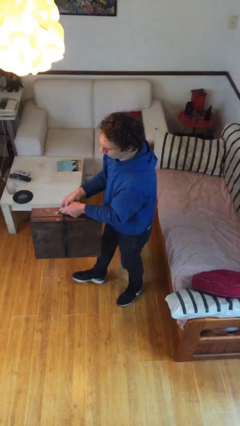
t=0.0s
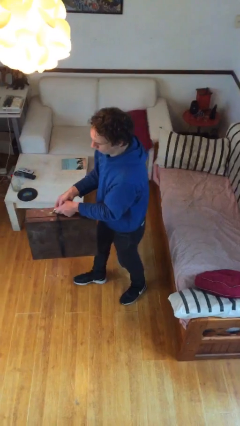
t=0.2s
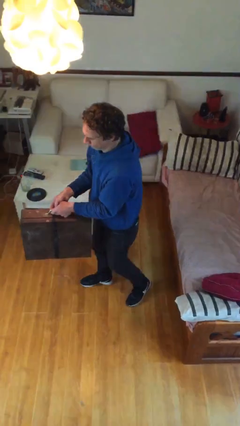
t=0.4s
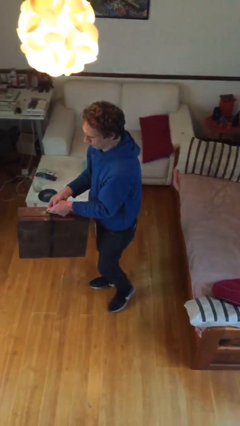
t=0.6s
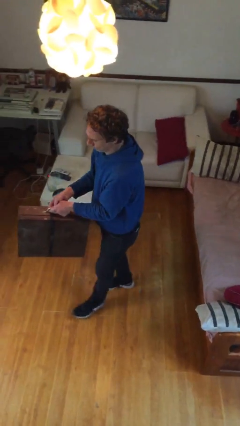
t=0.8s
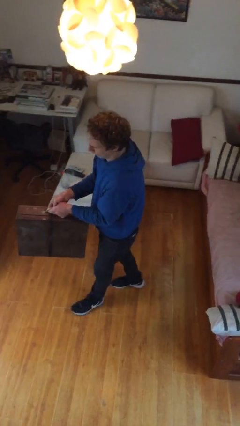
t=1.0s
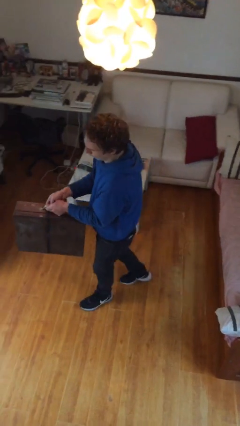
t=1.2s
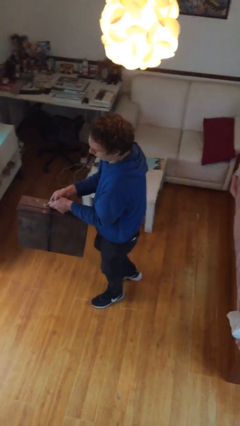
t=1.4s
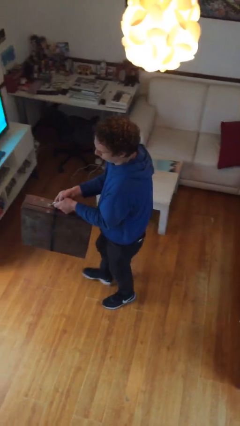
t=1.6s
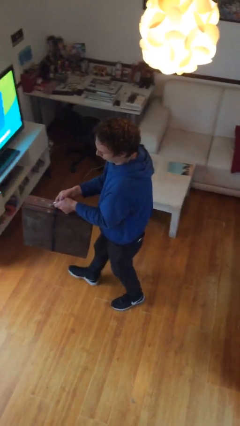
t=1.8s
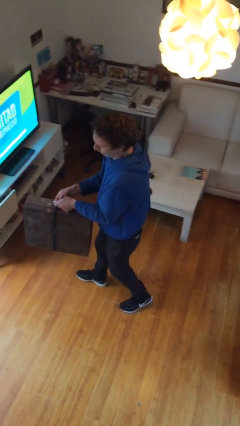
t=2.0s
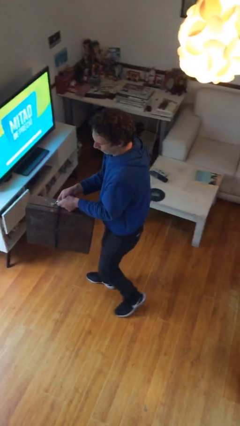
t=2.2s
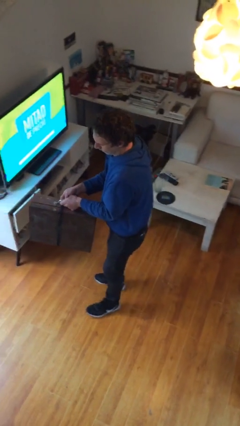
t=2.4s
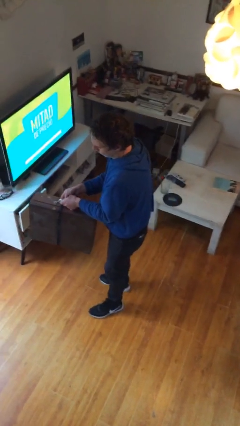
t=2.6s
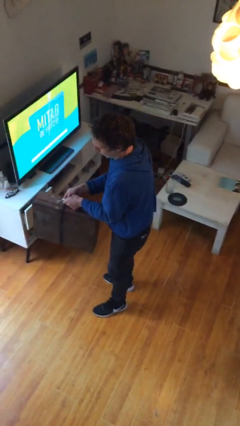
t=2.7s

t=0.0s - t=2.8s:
person carries heavy object

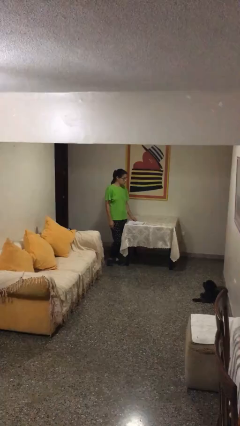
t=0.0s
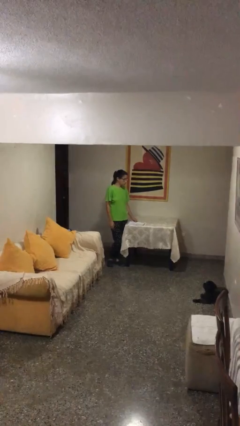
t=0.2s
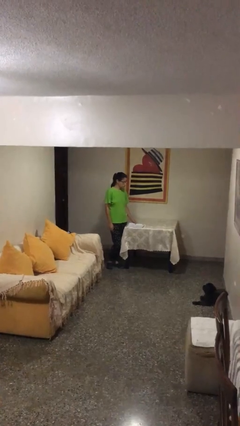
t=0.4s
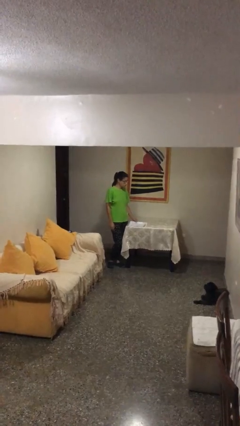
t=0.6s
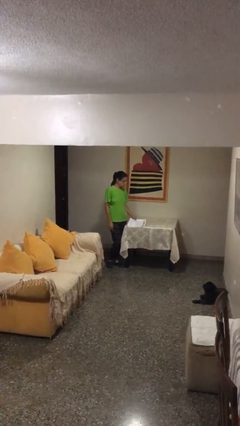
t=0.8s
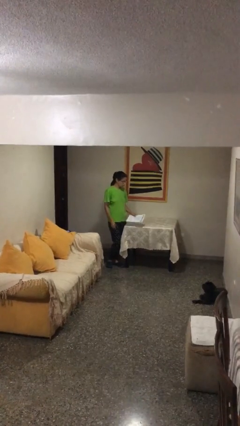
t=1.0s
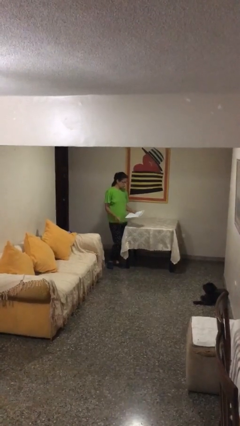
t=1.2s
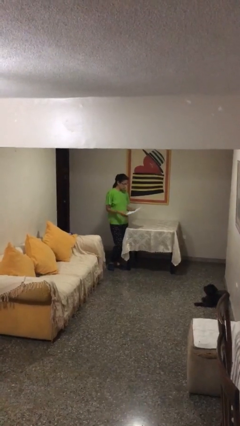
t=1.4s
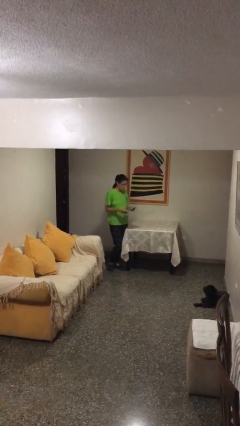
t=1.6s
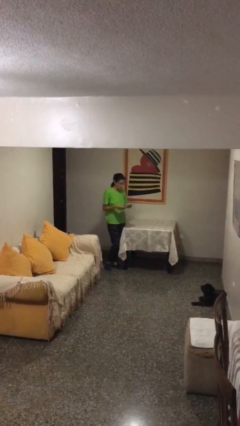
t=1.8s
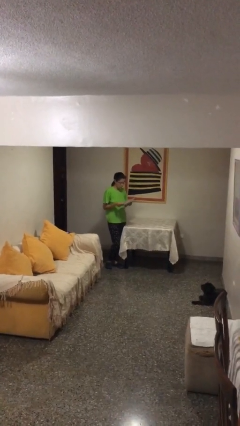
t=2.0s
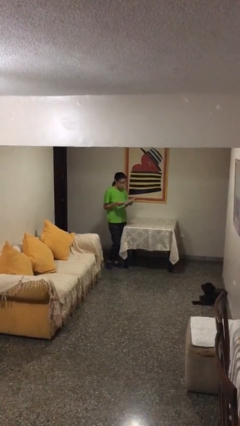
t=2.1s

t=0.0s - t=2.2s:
person picks up object from table

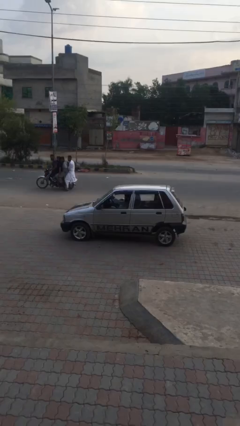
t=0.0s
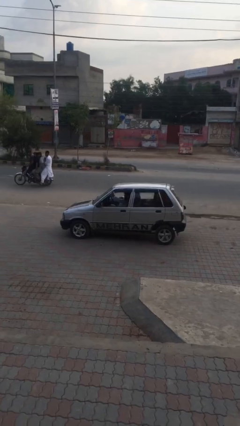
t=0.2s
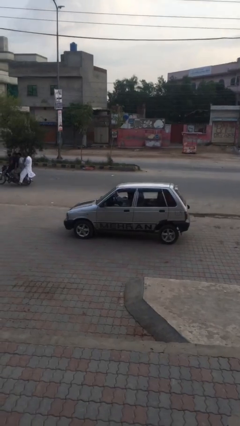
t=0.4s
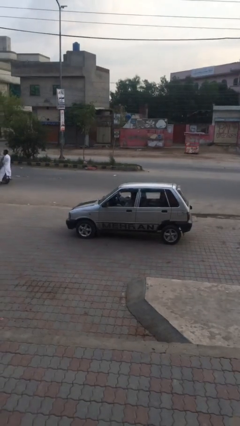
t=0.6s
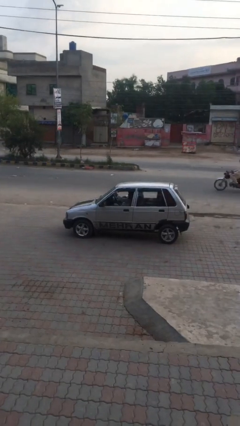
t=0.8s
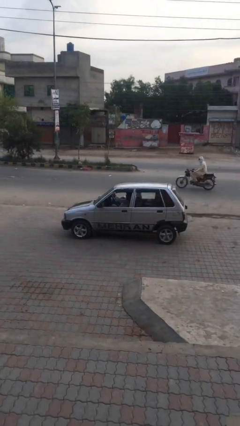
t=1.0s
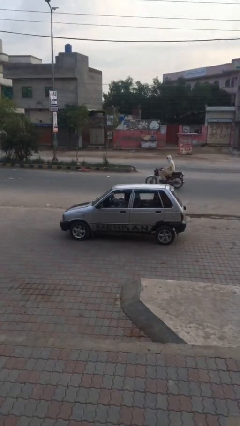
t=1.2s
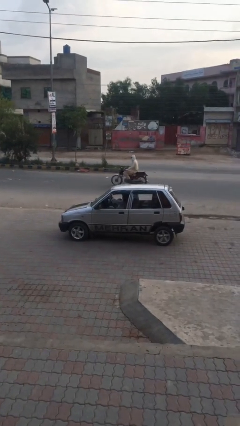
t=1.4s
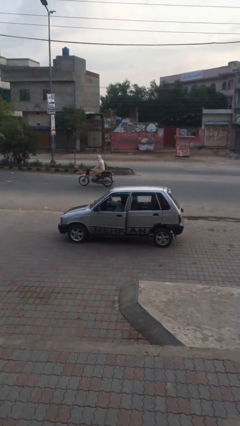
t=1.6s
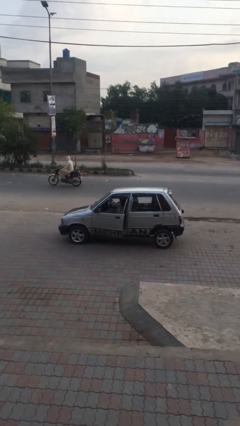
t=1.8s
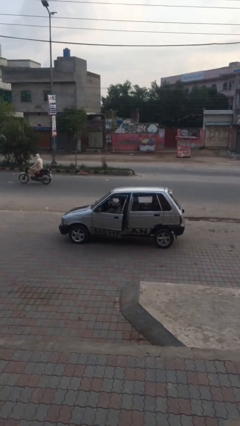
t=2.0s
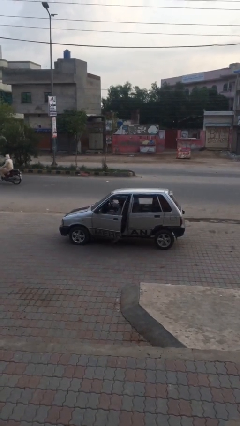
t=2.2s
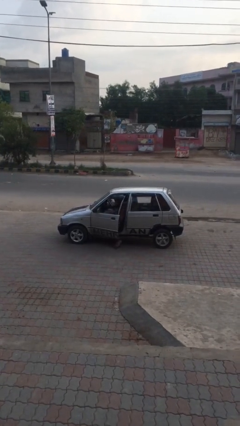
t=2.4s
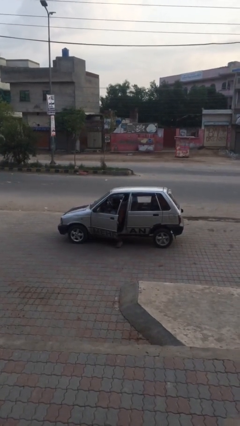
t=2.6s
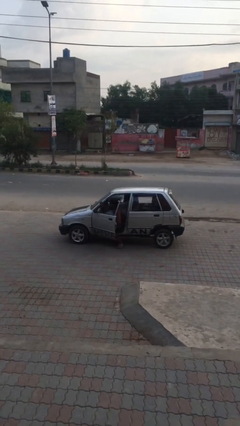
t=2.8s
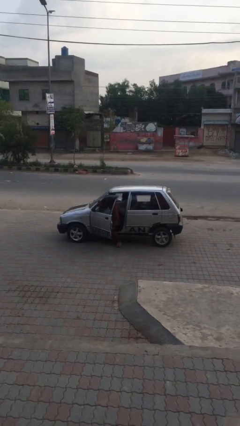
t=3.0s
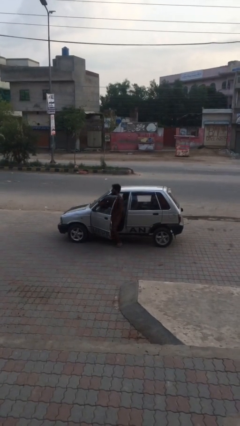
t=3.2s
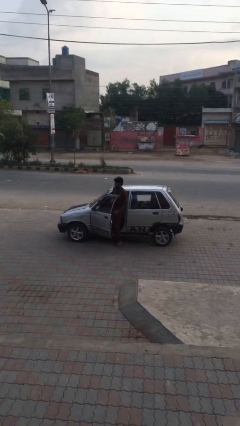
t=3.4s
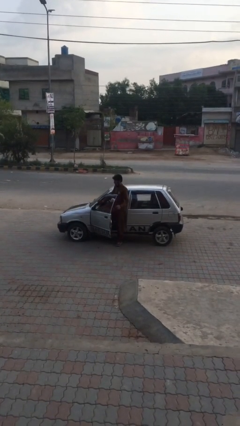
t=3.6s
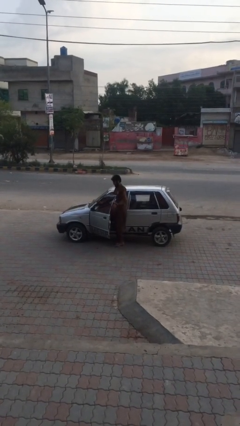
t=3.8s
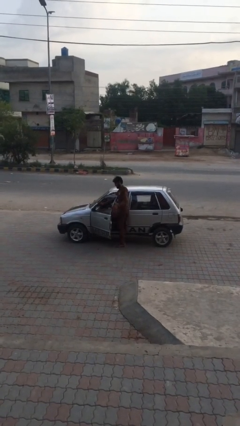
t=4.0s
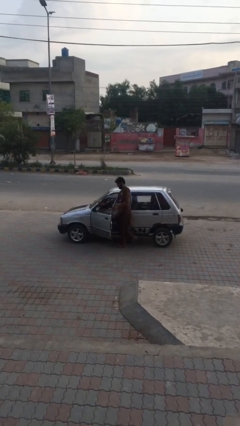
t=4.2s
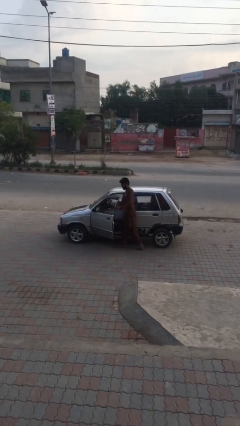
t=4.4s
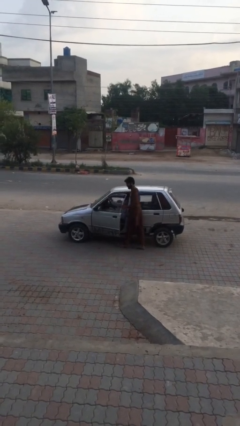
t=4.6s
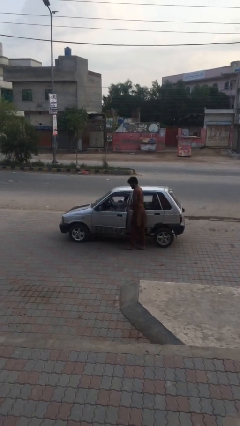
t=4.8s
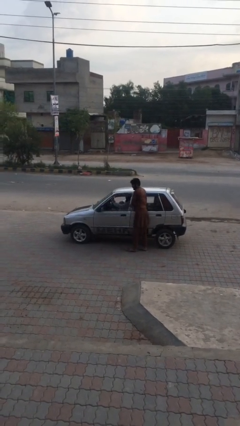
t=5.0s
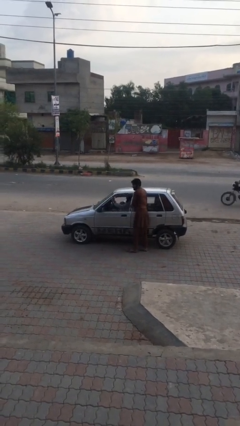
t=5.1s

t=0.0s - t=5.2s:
car drops off person

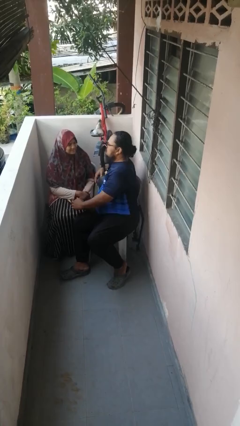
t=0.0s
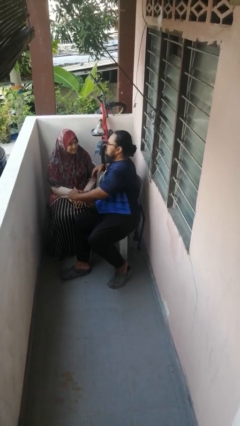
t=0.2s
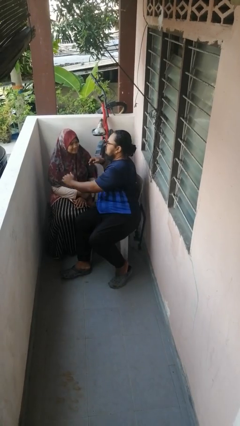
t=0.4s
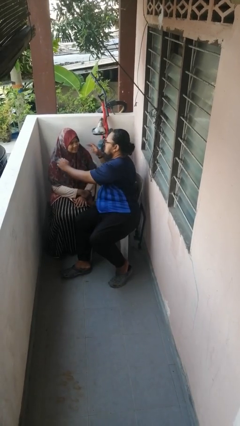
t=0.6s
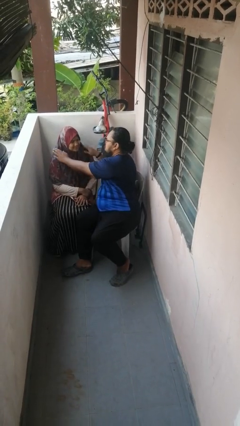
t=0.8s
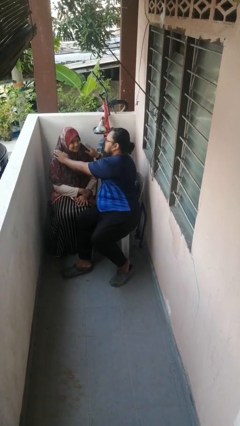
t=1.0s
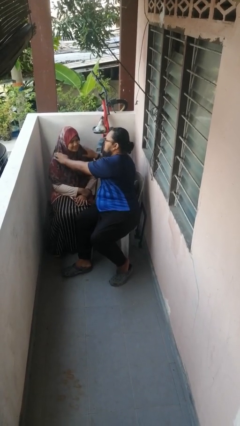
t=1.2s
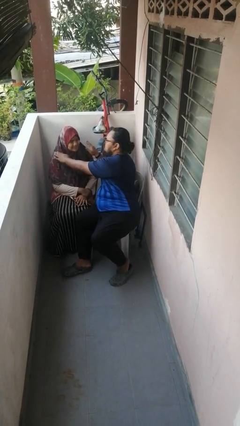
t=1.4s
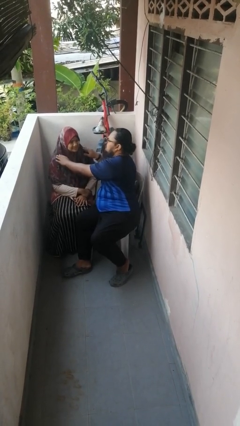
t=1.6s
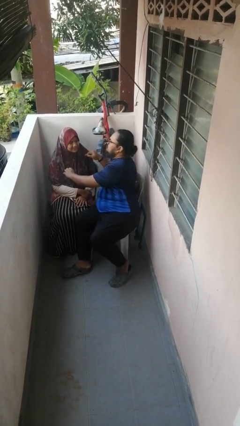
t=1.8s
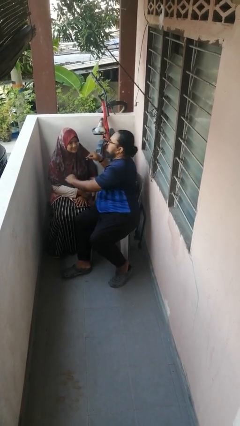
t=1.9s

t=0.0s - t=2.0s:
person pounds shoulders of person

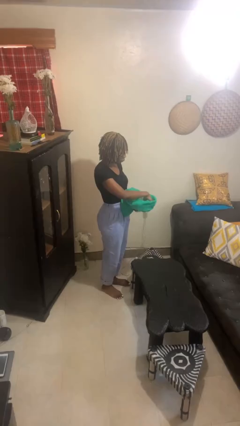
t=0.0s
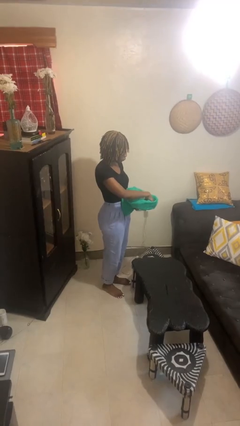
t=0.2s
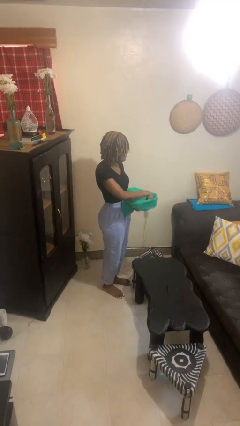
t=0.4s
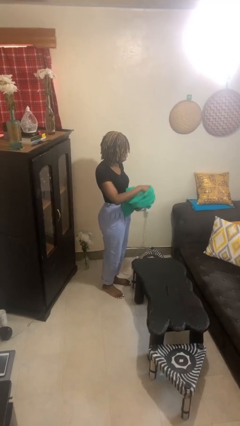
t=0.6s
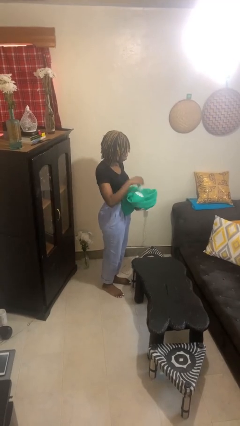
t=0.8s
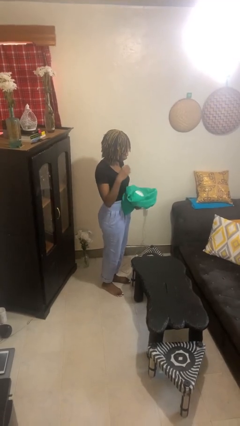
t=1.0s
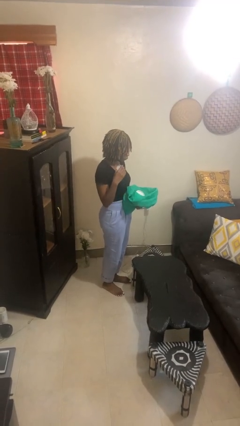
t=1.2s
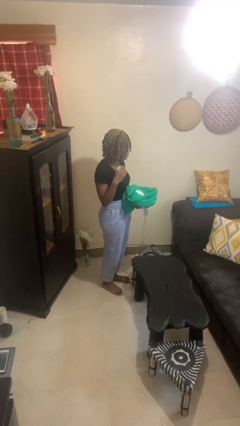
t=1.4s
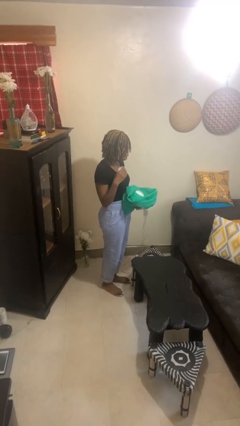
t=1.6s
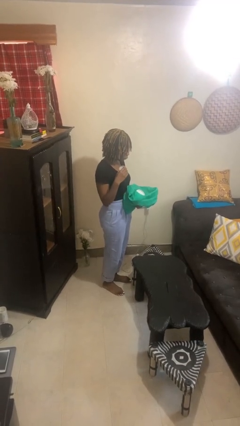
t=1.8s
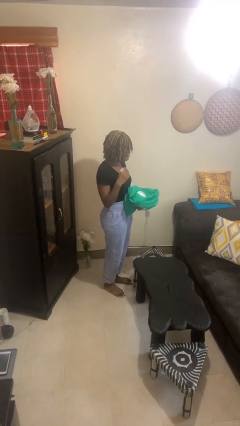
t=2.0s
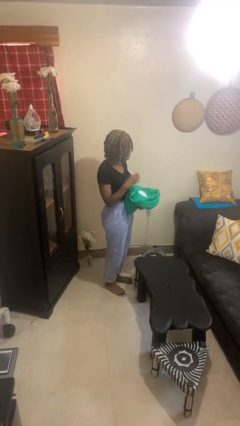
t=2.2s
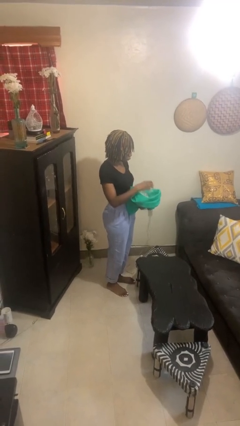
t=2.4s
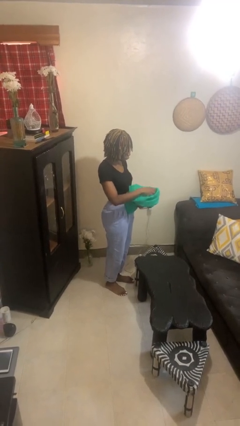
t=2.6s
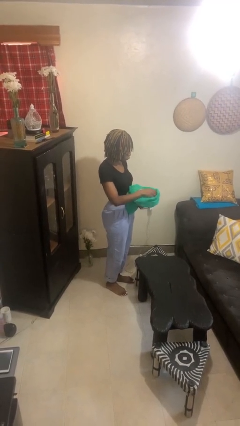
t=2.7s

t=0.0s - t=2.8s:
person takes object from bag

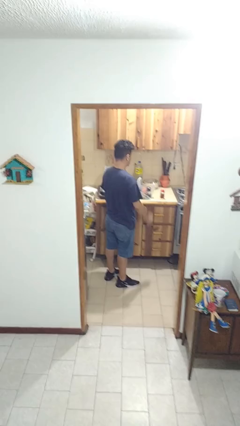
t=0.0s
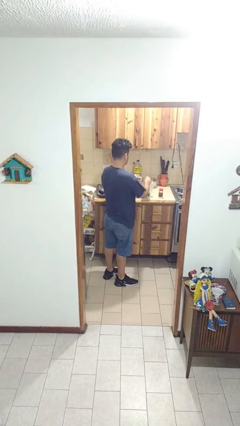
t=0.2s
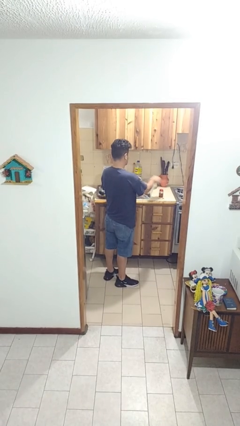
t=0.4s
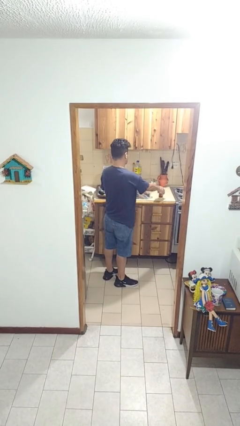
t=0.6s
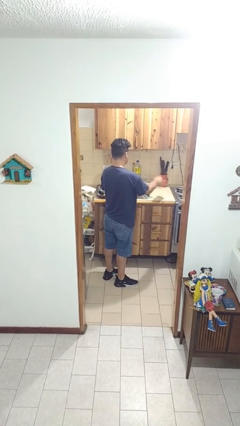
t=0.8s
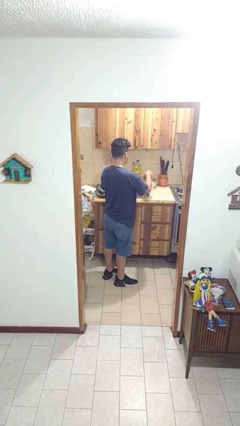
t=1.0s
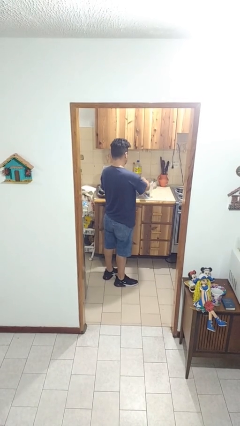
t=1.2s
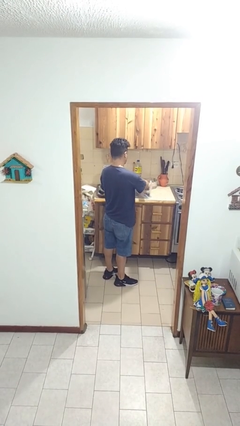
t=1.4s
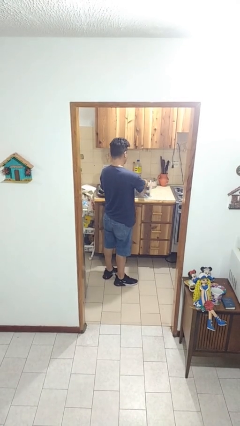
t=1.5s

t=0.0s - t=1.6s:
person puts object into bag

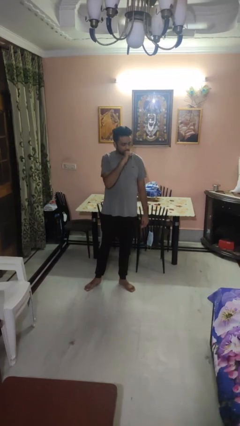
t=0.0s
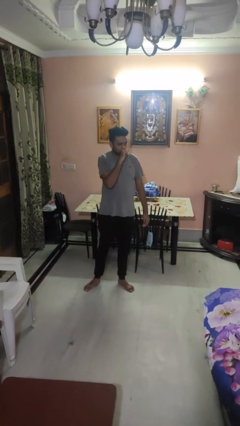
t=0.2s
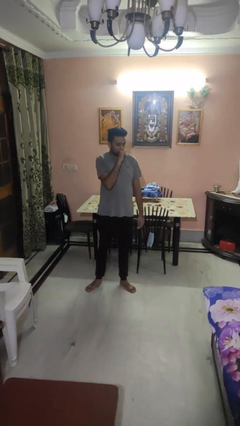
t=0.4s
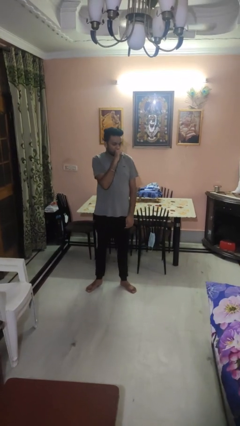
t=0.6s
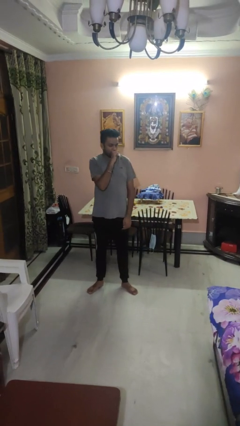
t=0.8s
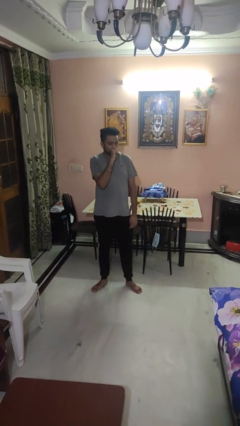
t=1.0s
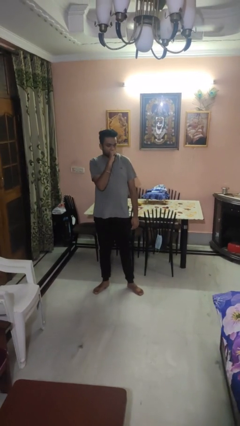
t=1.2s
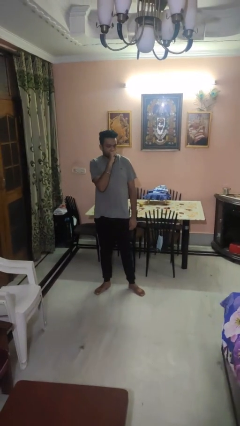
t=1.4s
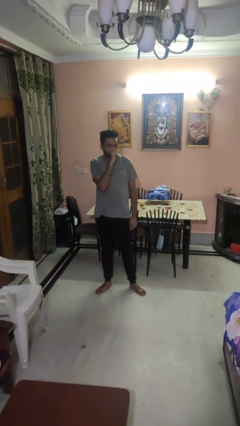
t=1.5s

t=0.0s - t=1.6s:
person vapes
